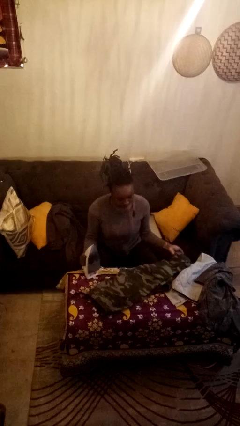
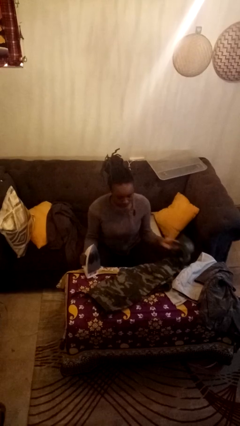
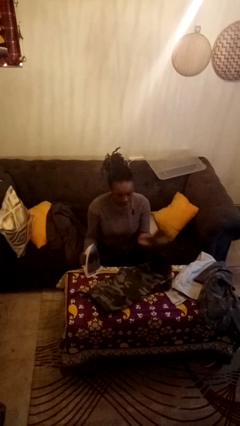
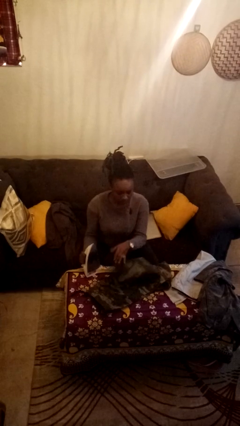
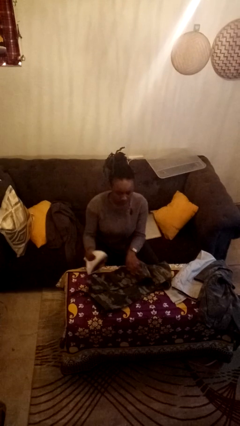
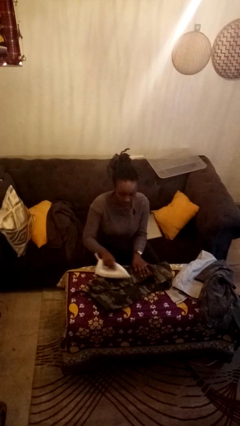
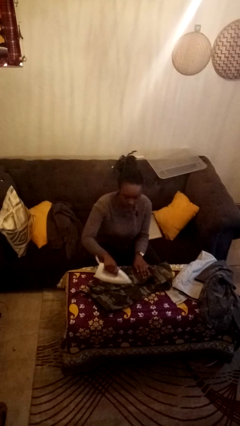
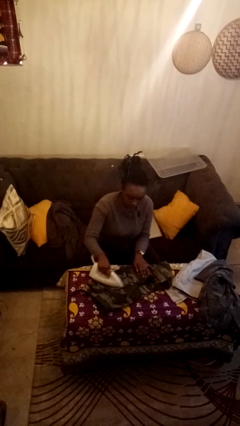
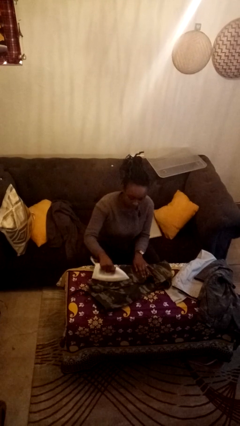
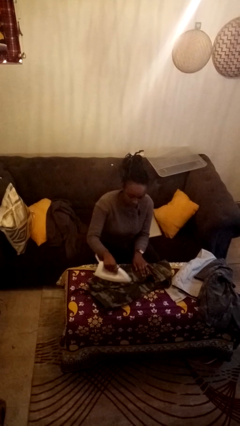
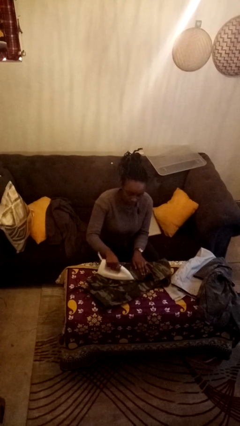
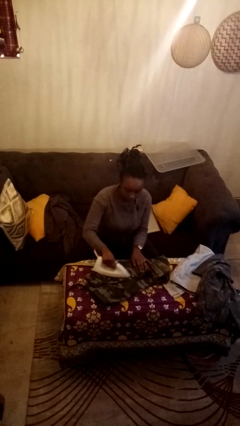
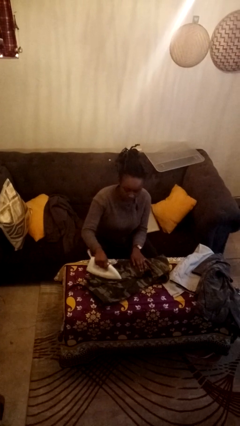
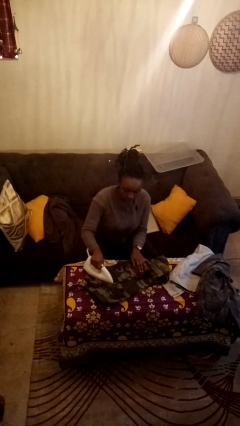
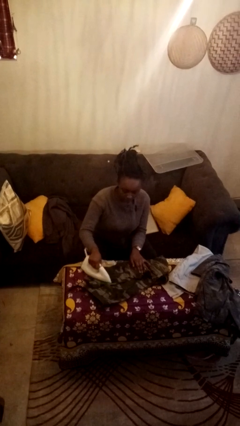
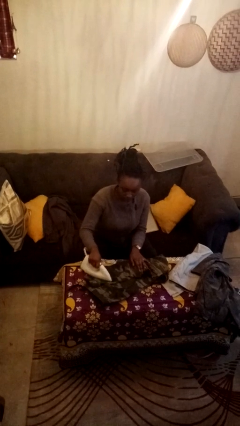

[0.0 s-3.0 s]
person irons clothes

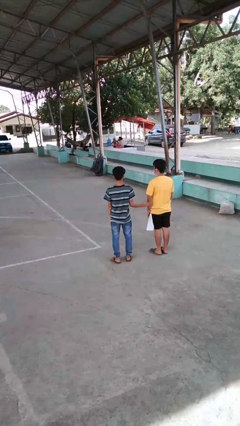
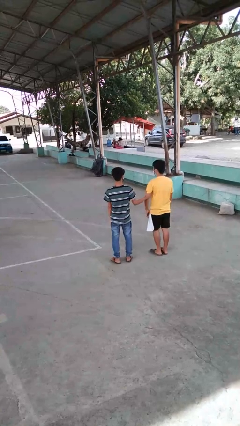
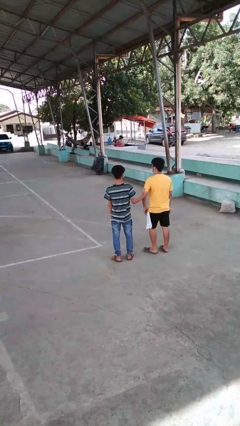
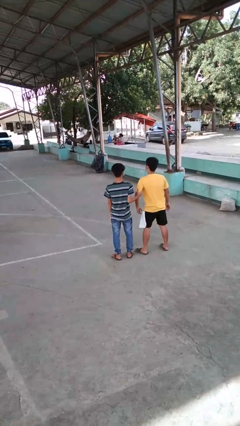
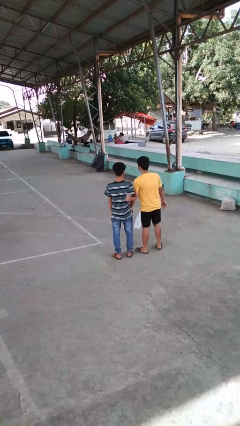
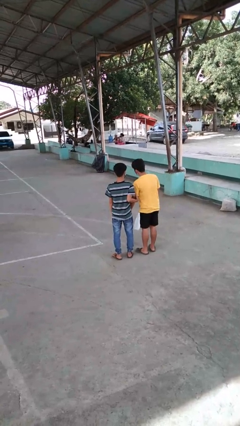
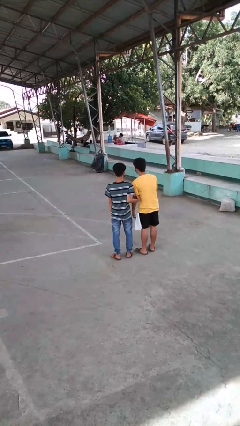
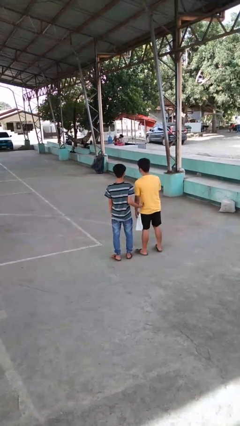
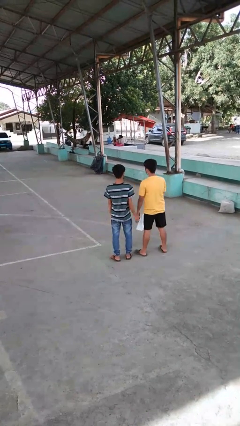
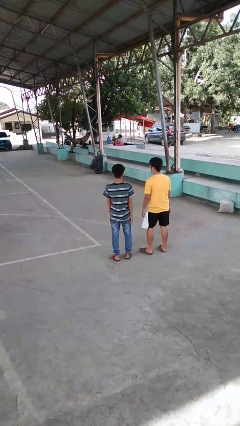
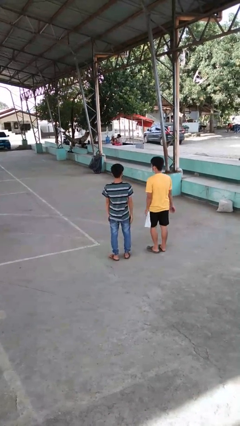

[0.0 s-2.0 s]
person grabs person by bicep

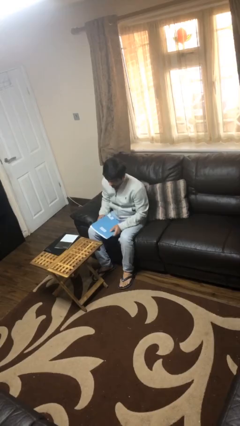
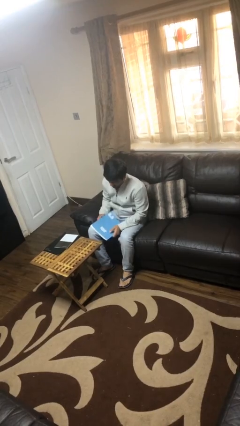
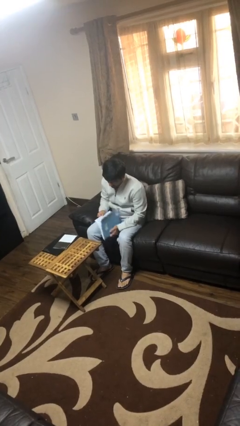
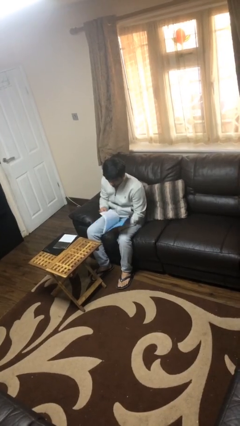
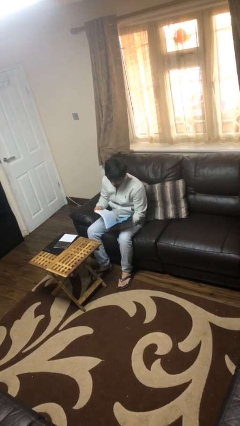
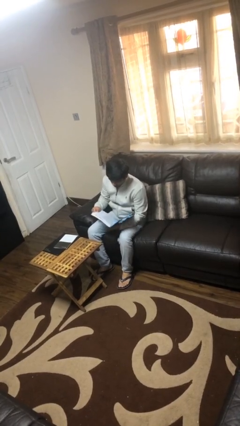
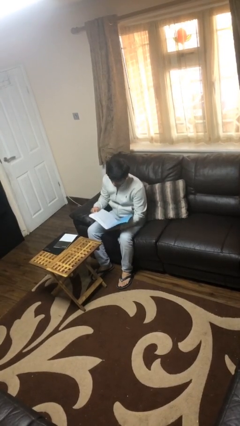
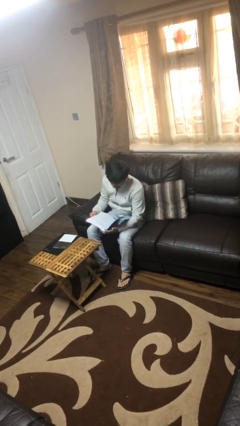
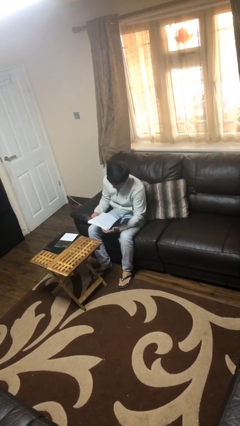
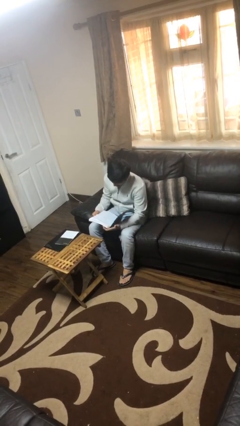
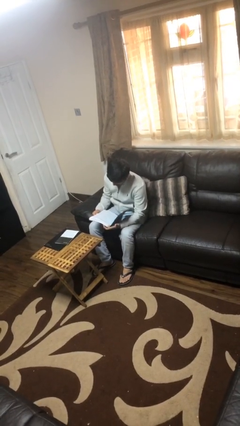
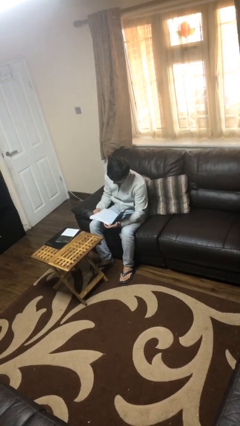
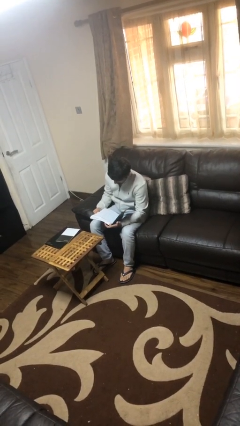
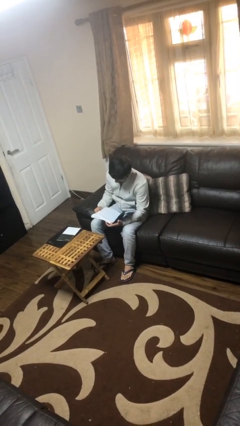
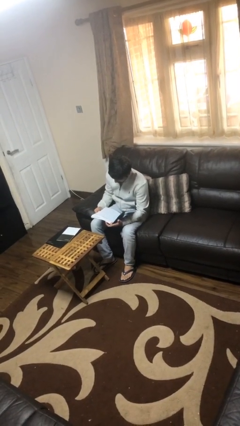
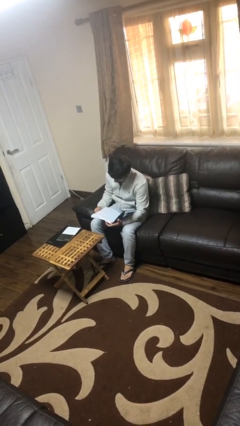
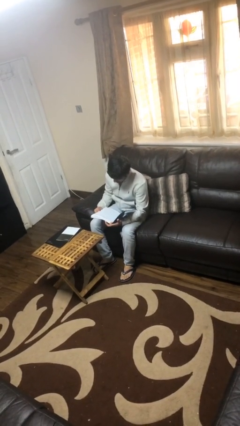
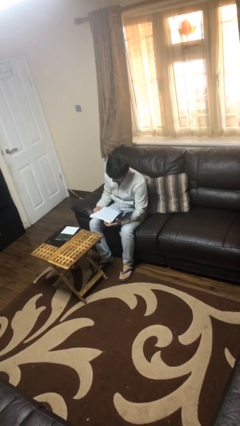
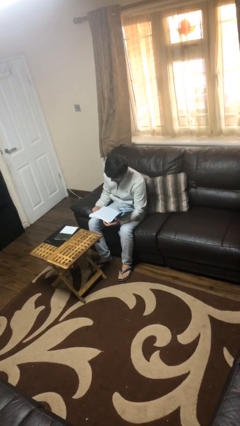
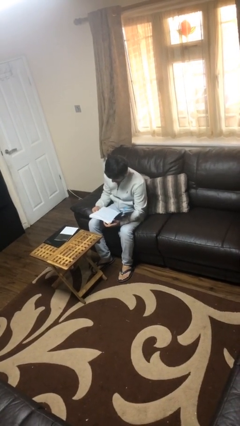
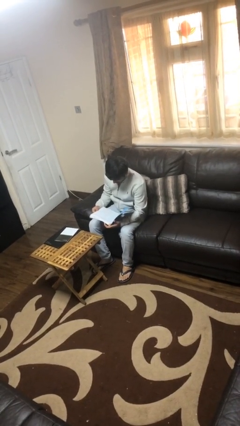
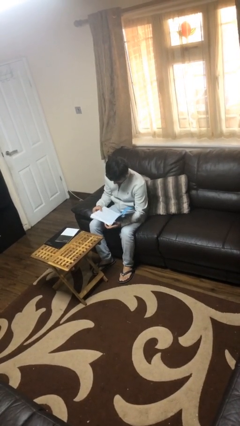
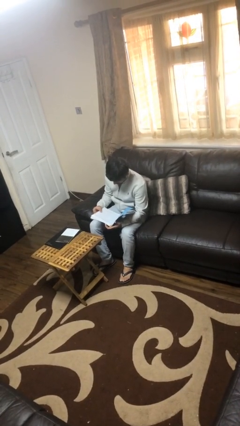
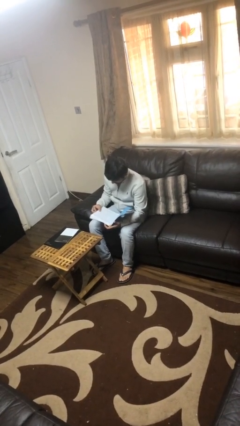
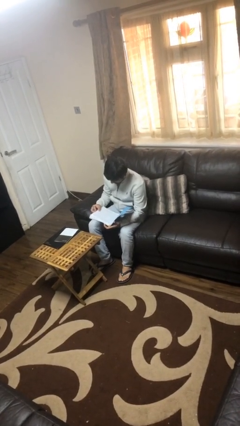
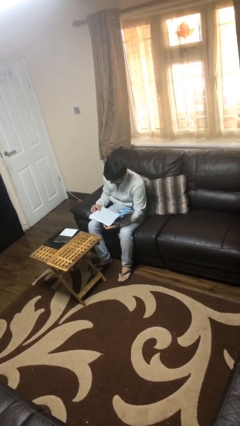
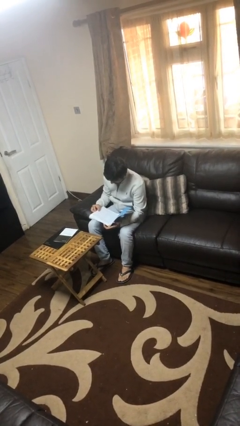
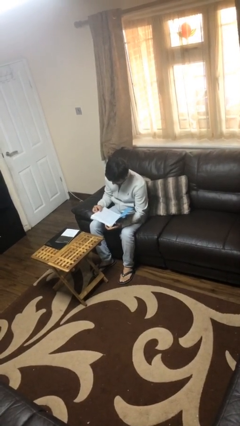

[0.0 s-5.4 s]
person reads document

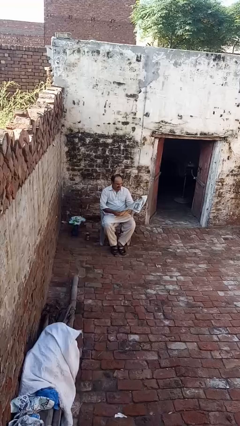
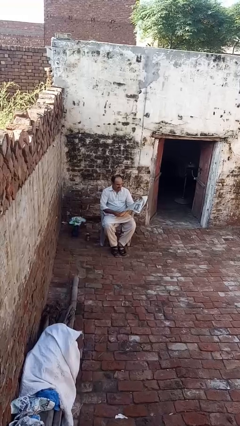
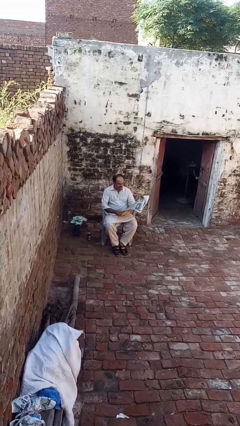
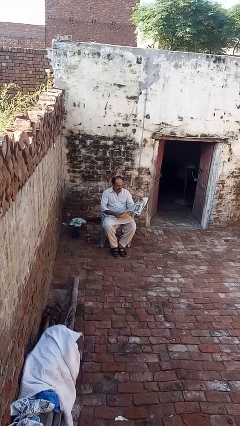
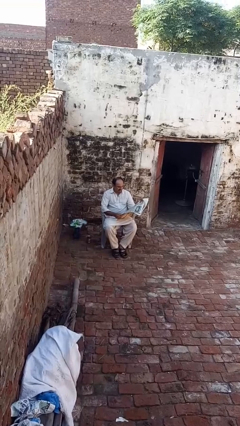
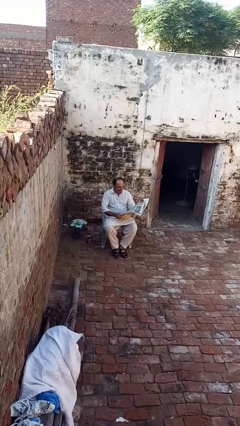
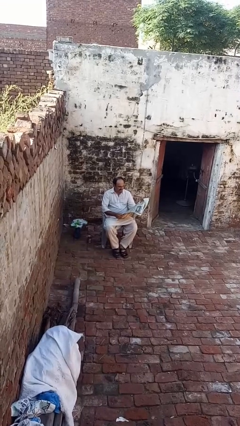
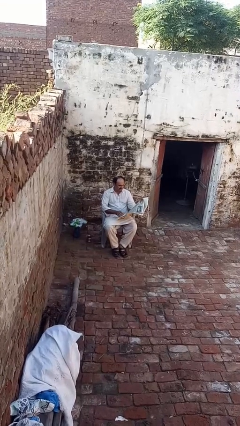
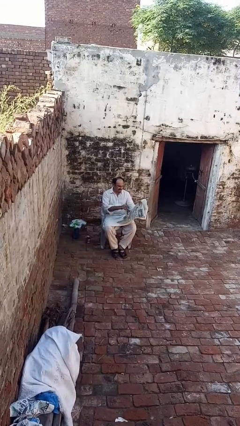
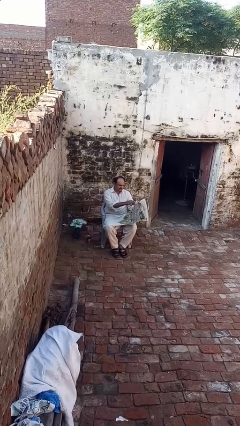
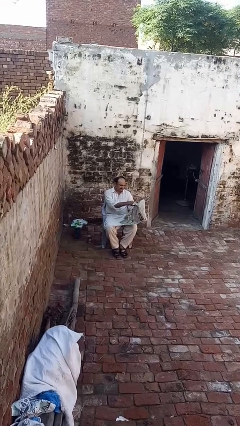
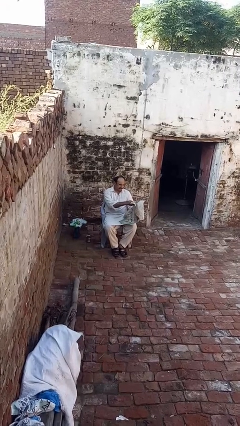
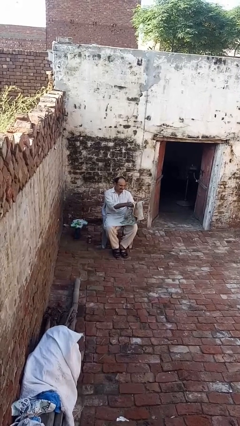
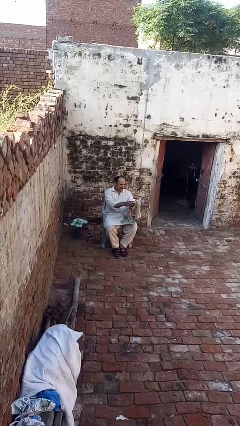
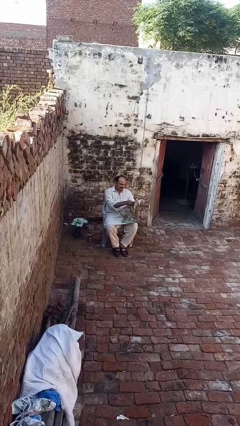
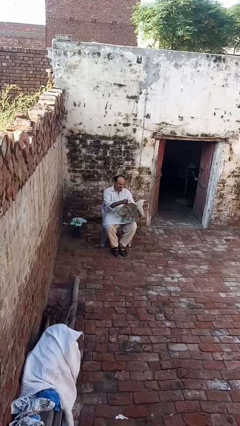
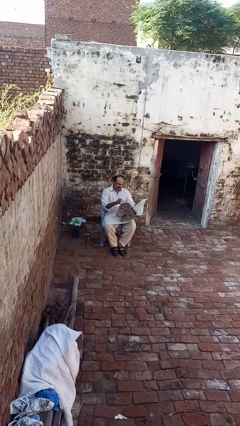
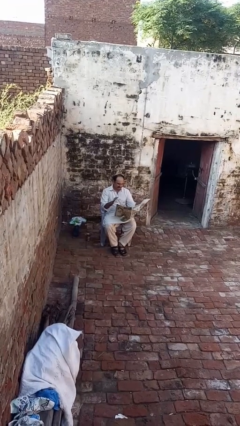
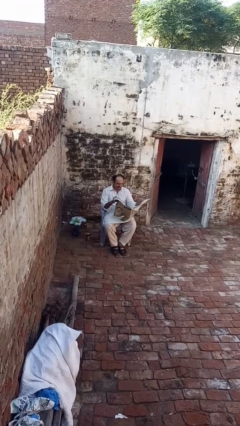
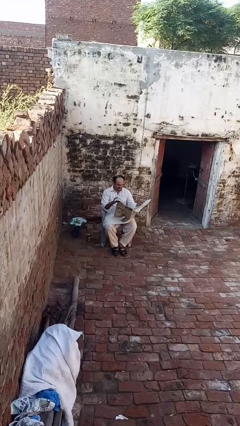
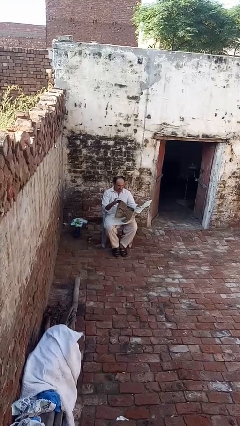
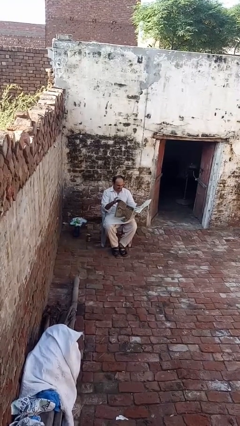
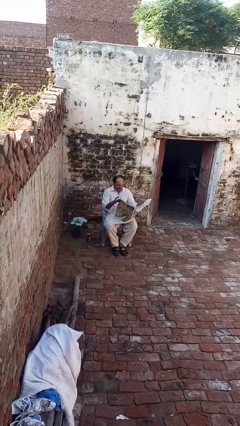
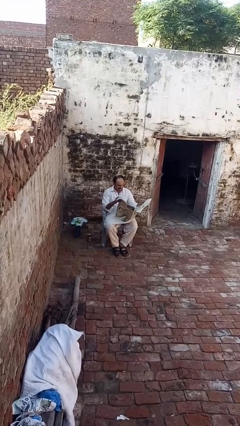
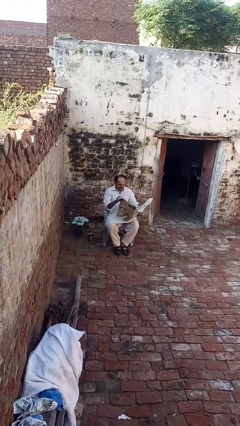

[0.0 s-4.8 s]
person reads newspaper

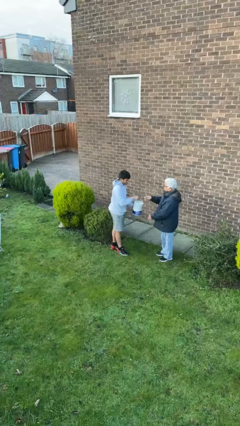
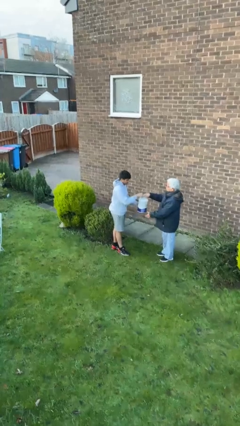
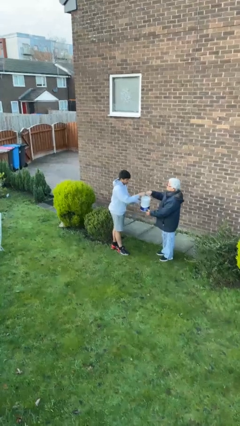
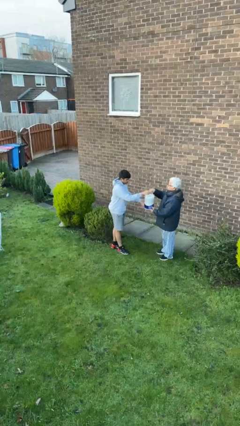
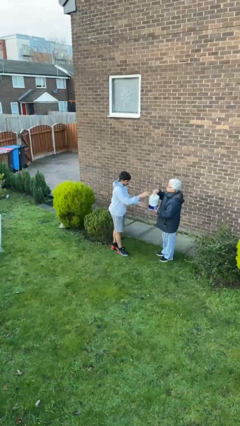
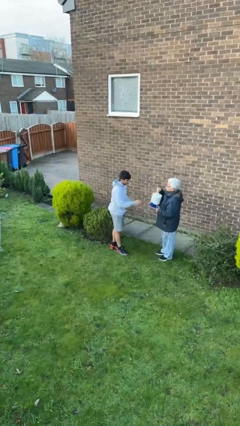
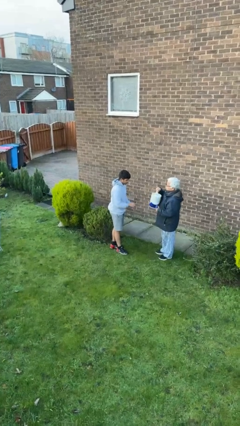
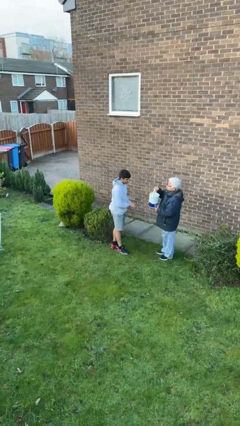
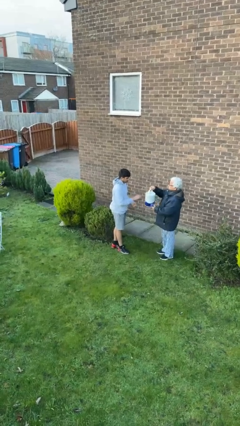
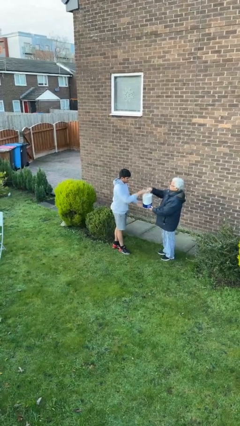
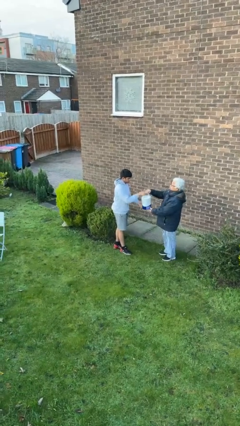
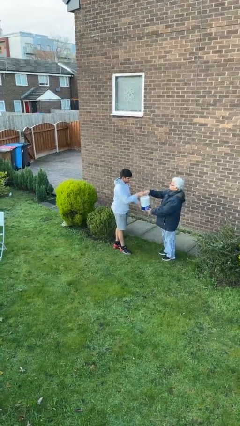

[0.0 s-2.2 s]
person transfers object to person

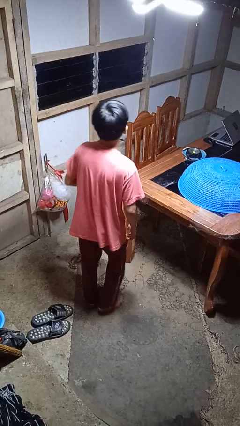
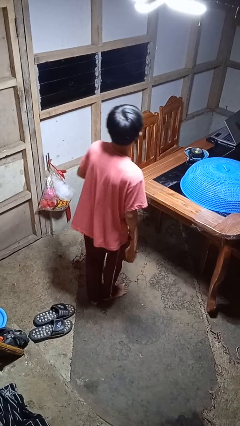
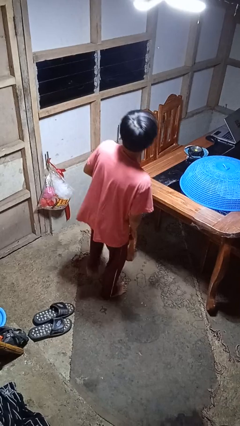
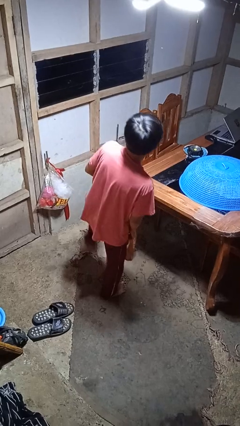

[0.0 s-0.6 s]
person karate kicks
